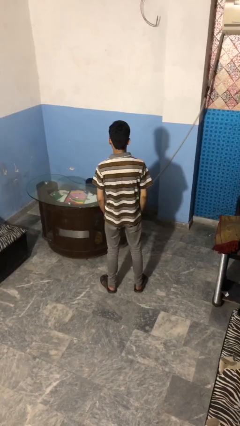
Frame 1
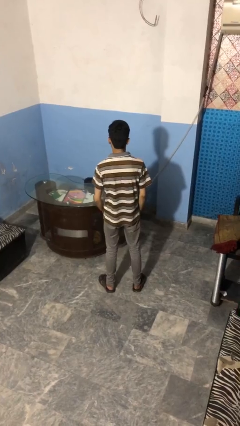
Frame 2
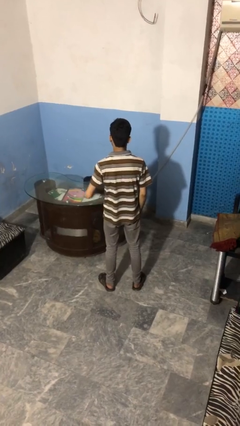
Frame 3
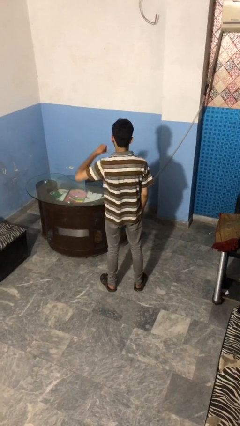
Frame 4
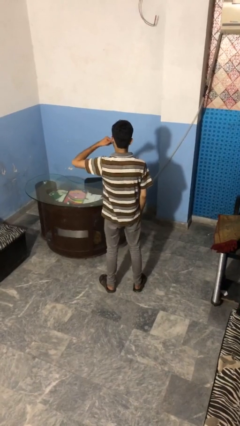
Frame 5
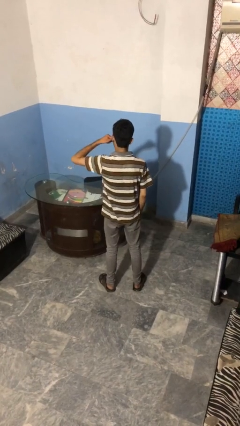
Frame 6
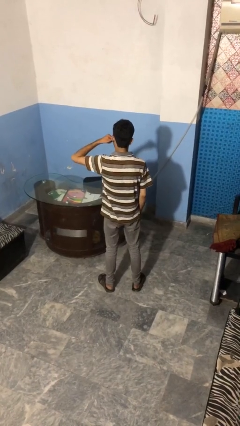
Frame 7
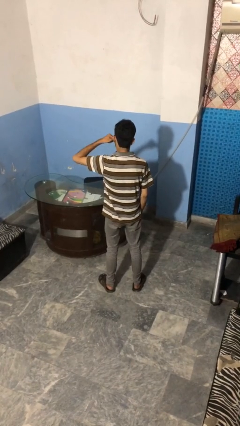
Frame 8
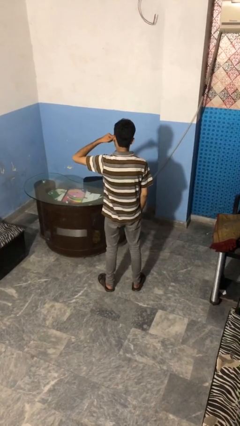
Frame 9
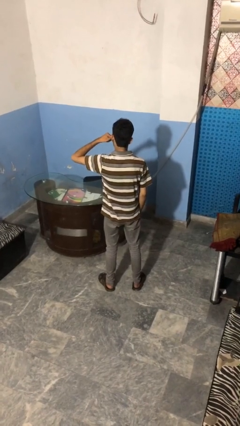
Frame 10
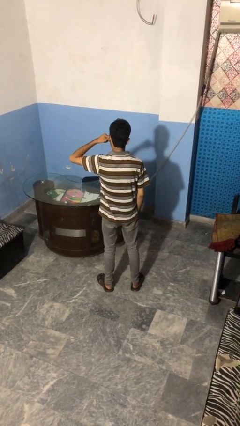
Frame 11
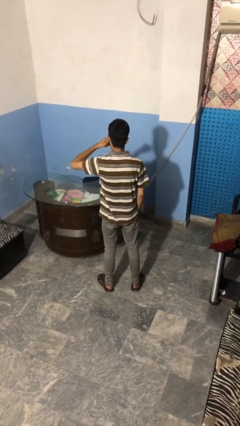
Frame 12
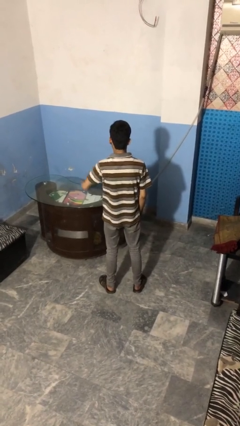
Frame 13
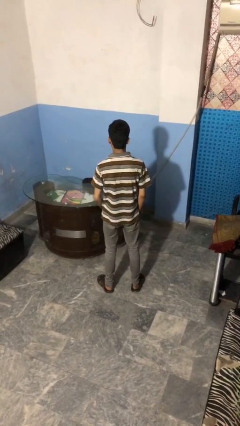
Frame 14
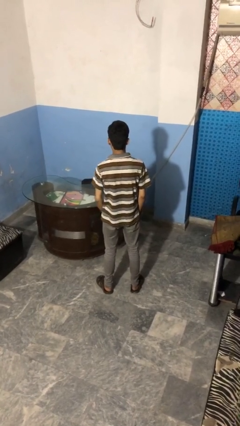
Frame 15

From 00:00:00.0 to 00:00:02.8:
person gestures call me

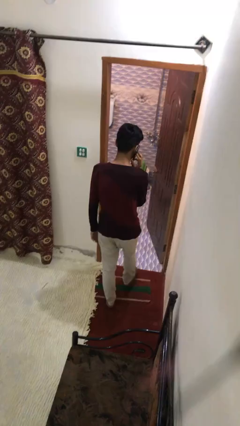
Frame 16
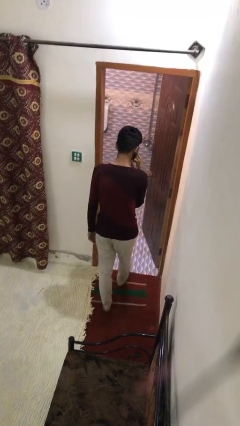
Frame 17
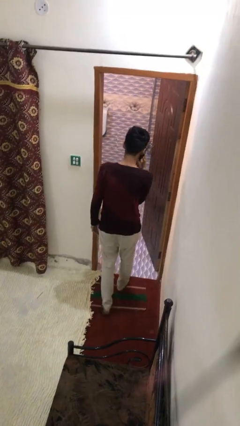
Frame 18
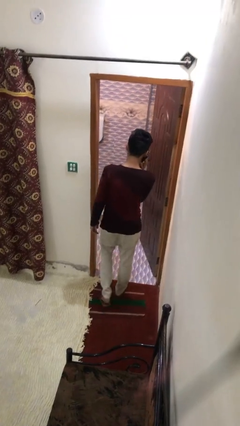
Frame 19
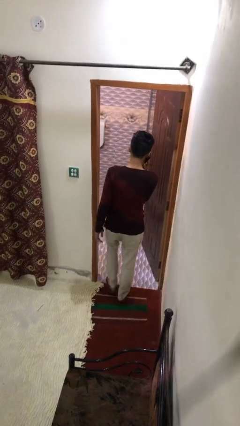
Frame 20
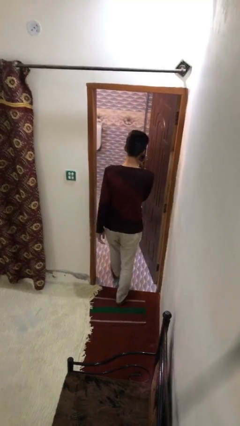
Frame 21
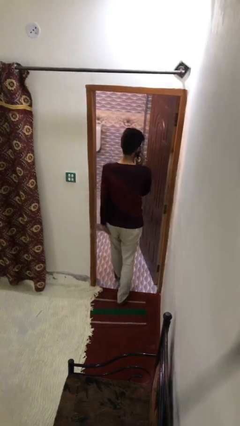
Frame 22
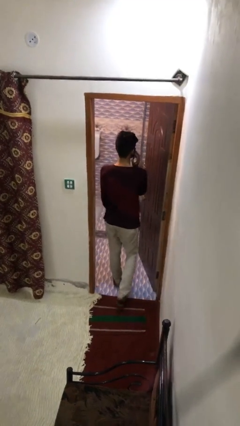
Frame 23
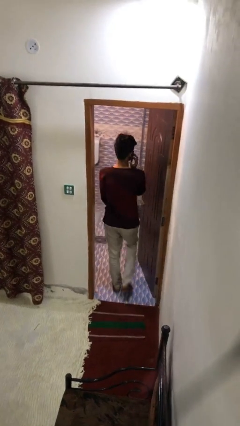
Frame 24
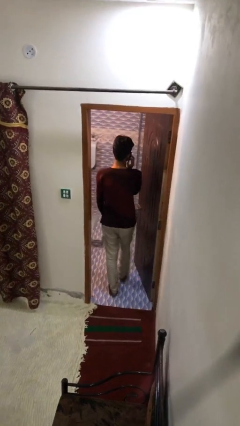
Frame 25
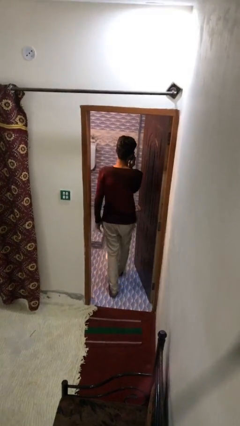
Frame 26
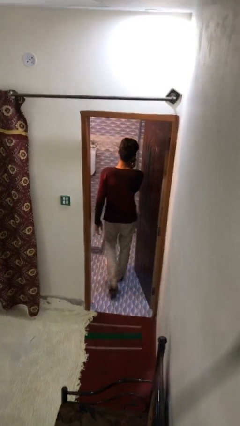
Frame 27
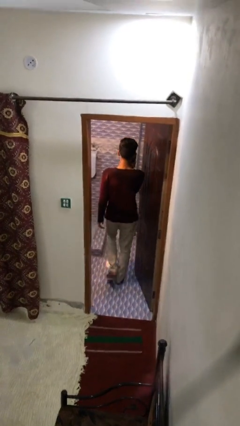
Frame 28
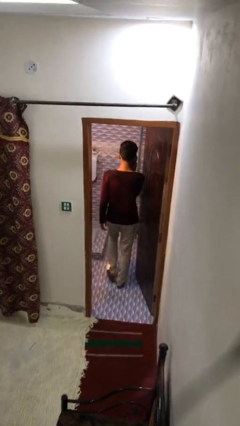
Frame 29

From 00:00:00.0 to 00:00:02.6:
person exits scene through structure

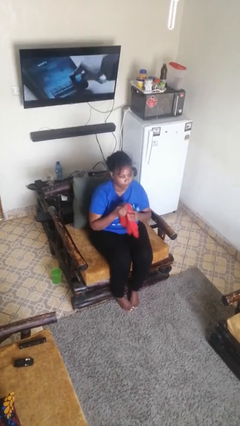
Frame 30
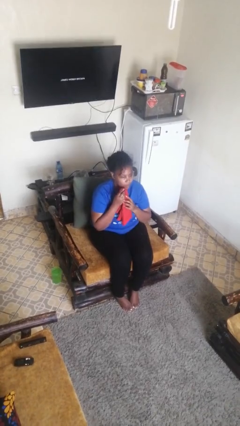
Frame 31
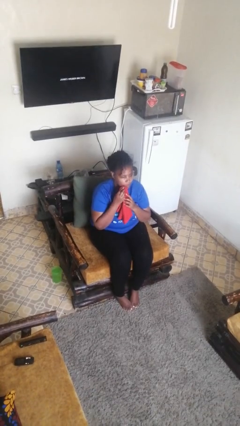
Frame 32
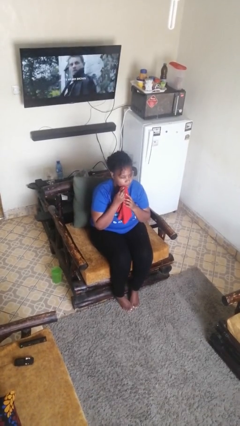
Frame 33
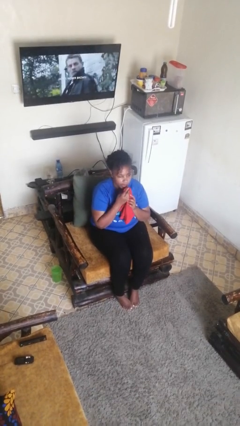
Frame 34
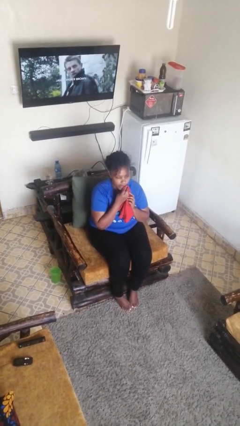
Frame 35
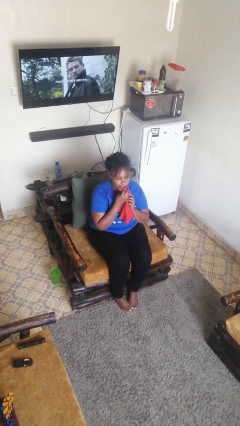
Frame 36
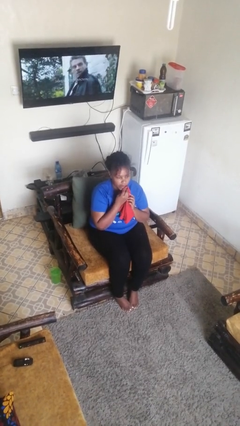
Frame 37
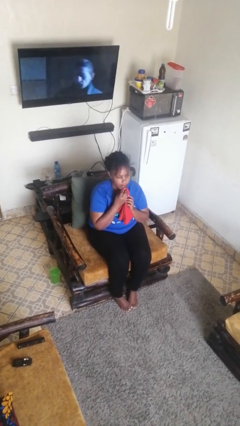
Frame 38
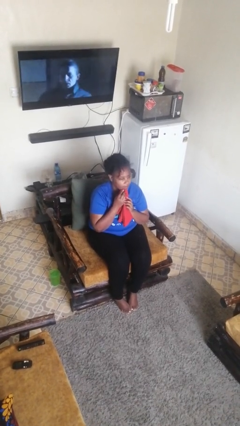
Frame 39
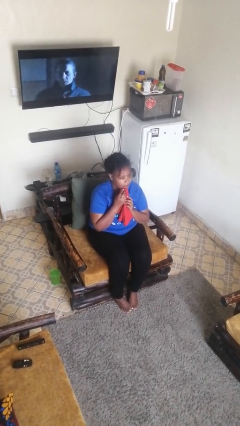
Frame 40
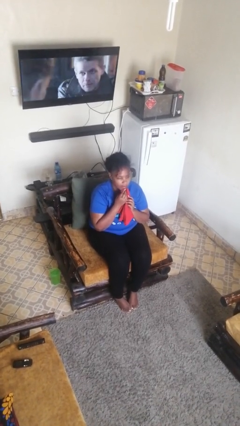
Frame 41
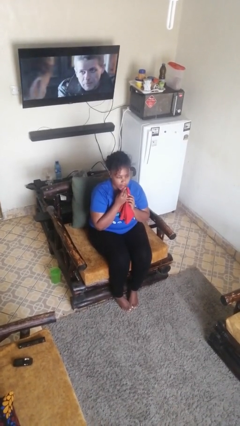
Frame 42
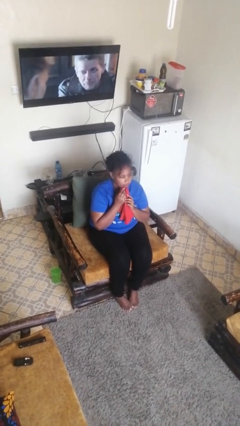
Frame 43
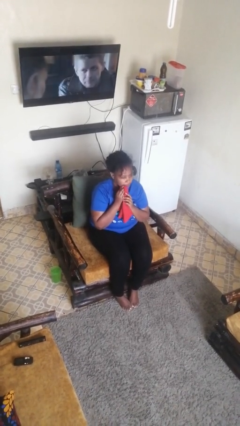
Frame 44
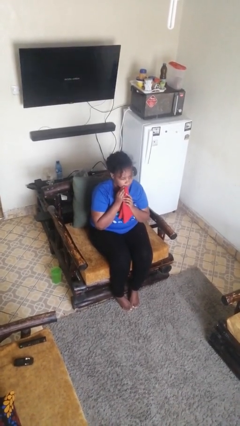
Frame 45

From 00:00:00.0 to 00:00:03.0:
person wipes mouth with napkin

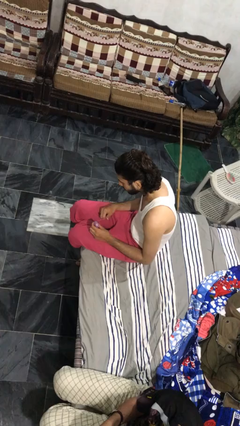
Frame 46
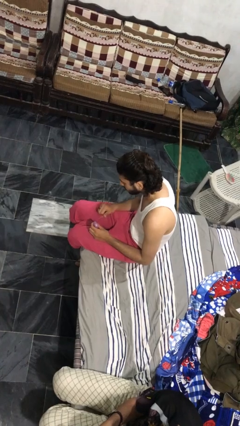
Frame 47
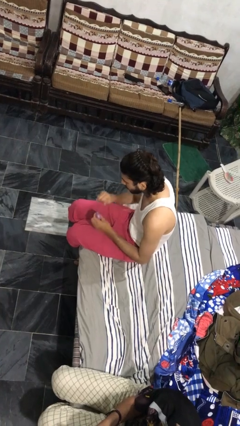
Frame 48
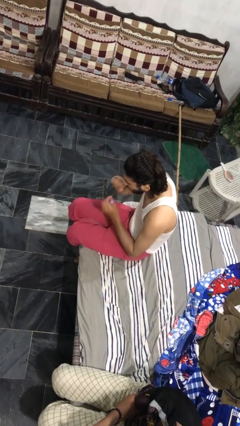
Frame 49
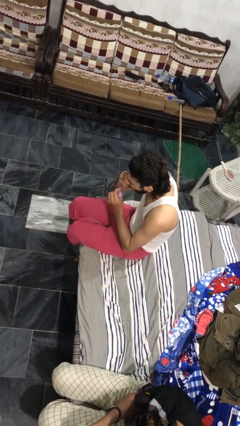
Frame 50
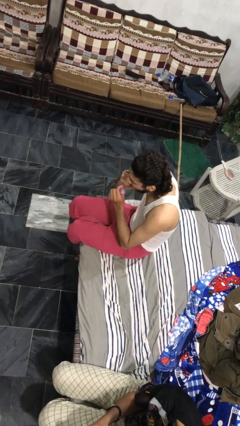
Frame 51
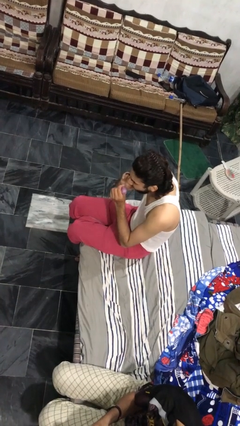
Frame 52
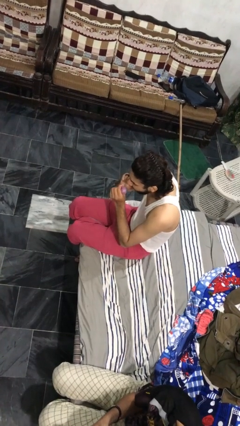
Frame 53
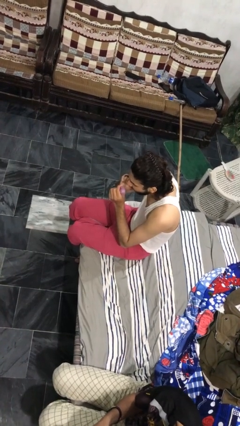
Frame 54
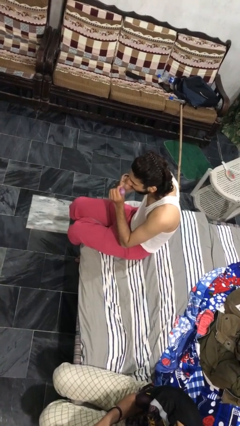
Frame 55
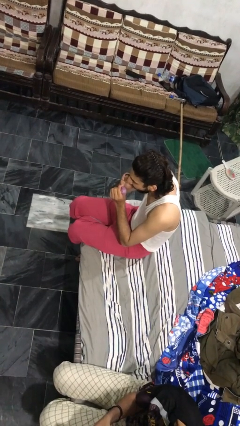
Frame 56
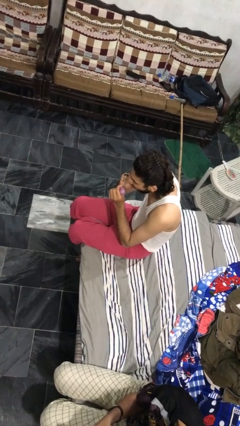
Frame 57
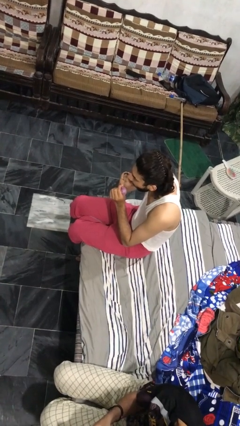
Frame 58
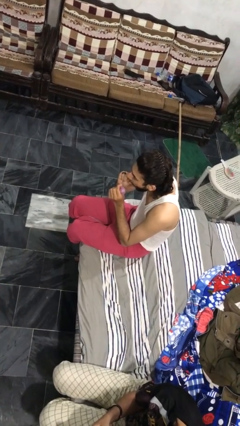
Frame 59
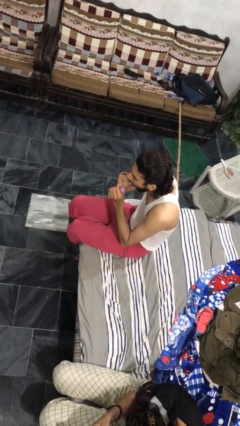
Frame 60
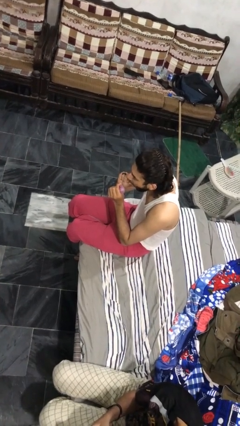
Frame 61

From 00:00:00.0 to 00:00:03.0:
person flosses

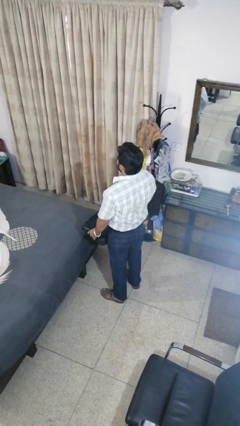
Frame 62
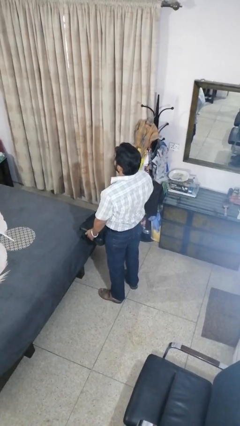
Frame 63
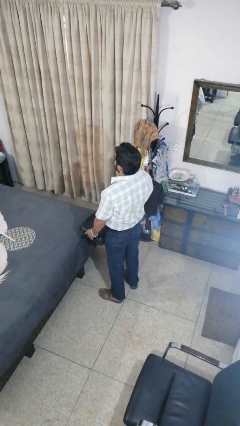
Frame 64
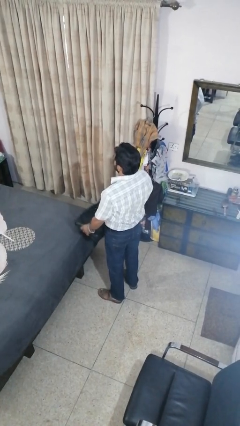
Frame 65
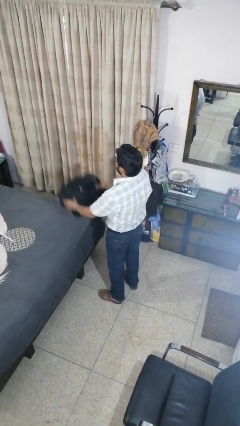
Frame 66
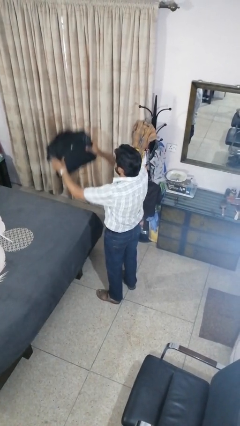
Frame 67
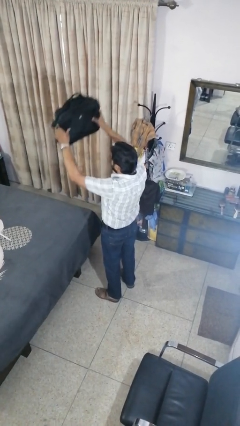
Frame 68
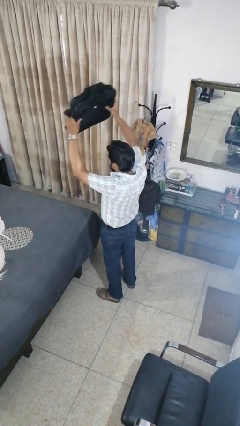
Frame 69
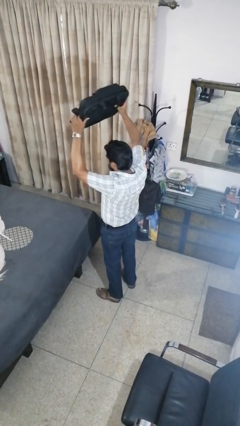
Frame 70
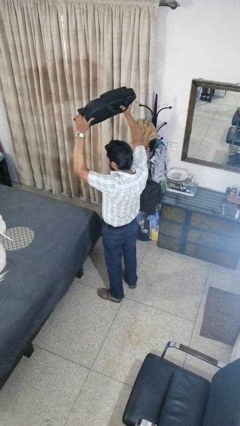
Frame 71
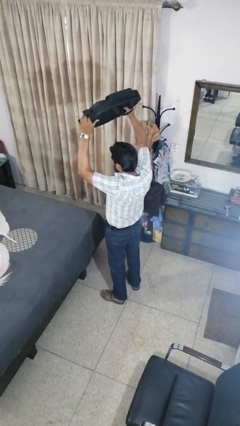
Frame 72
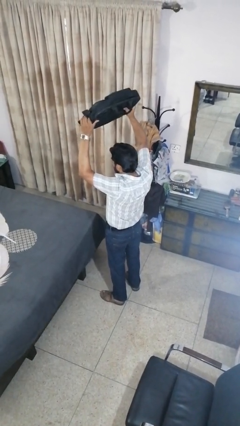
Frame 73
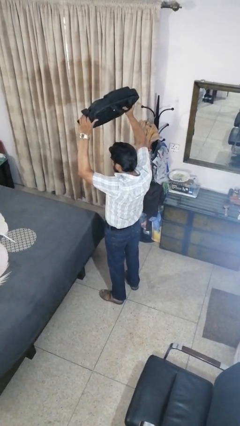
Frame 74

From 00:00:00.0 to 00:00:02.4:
person holds object above head

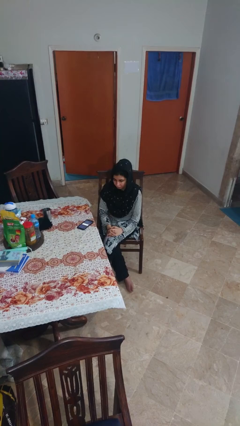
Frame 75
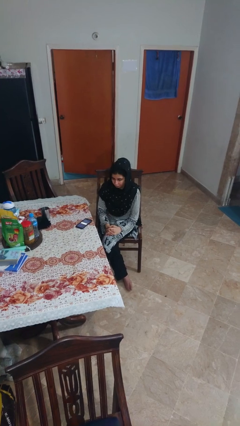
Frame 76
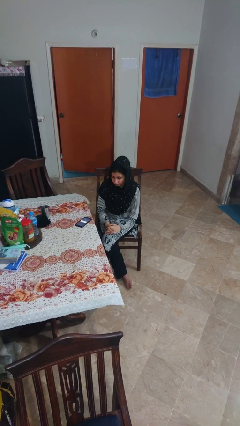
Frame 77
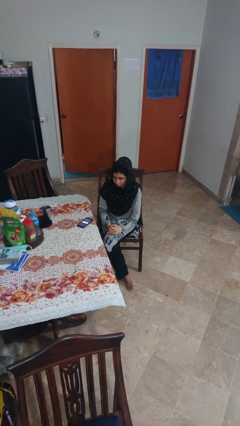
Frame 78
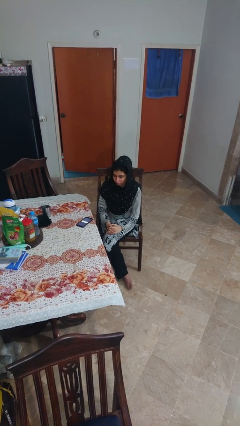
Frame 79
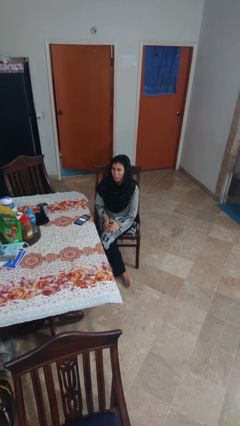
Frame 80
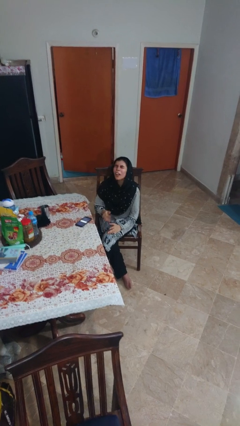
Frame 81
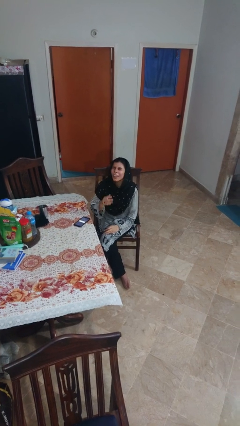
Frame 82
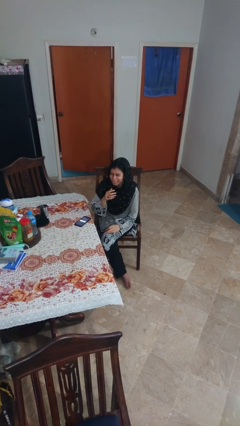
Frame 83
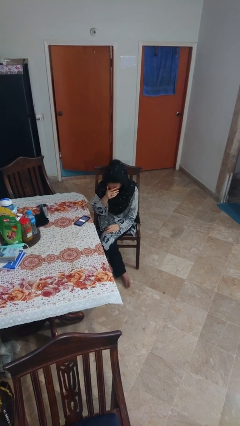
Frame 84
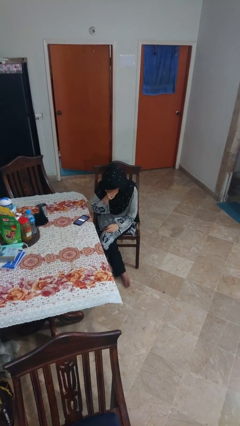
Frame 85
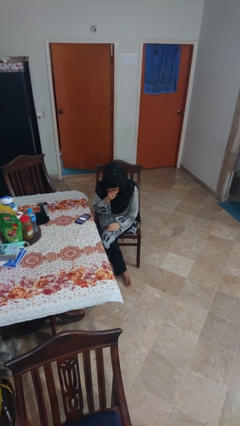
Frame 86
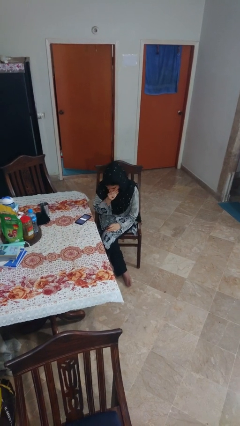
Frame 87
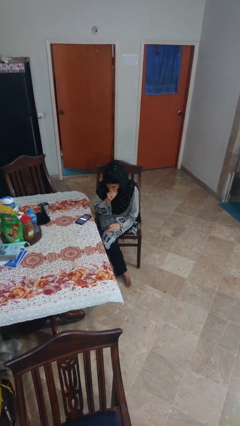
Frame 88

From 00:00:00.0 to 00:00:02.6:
person sneezes into hand

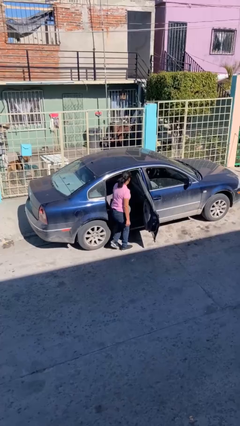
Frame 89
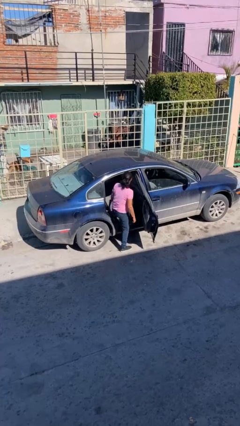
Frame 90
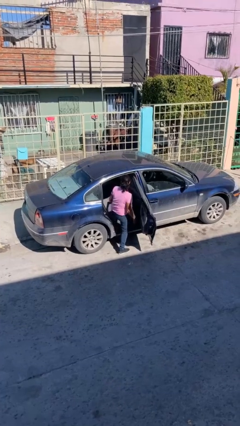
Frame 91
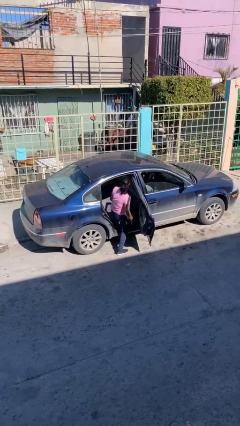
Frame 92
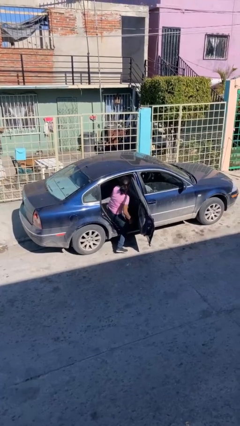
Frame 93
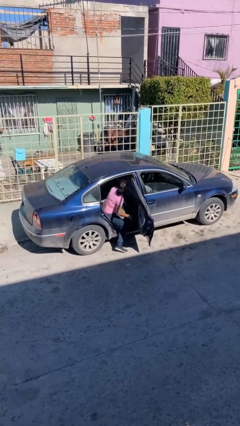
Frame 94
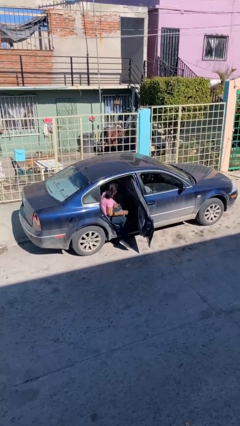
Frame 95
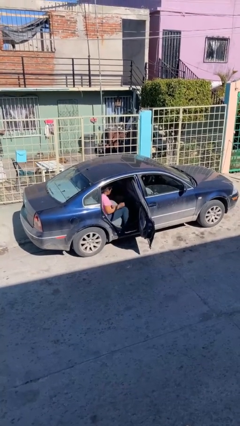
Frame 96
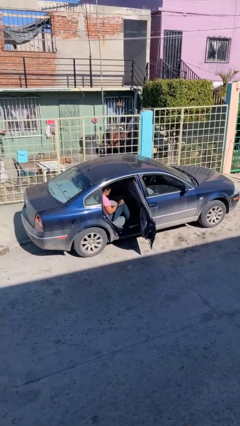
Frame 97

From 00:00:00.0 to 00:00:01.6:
person enters car
